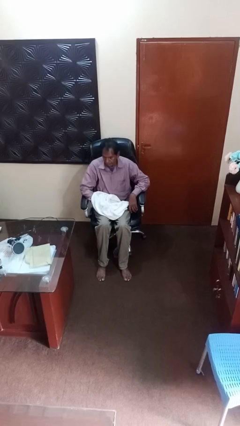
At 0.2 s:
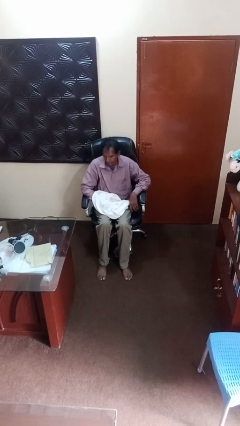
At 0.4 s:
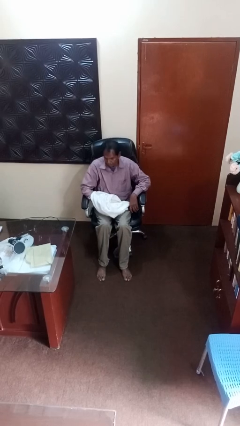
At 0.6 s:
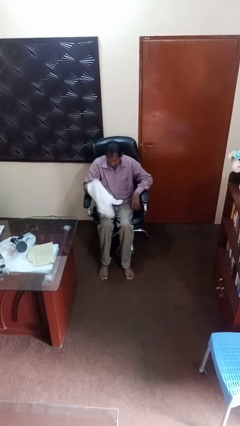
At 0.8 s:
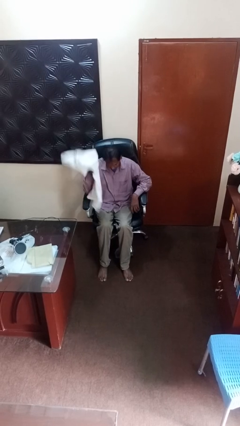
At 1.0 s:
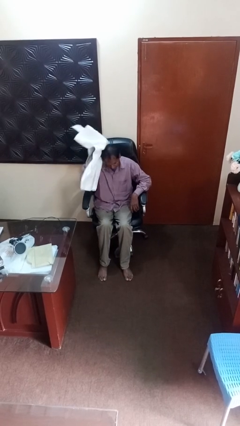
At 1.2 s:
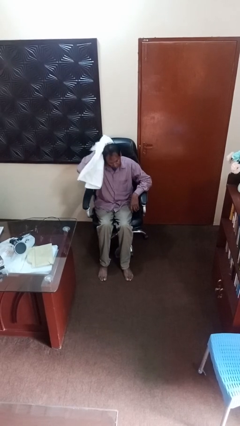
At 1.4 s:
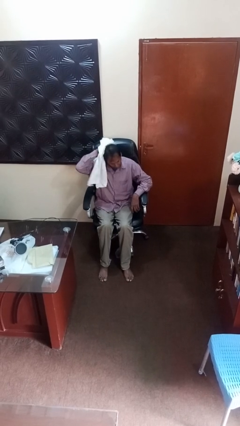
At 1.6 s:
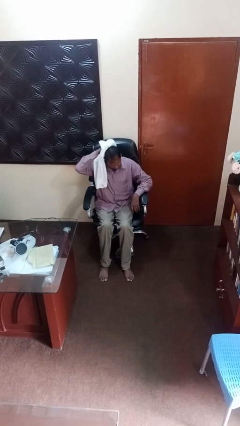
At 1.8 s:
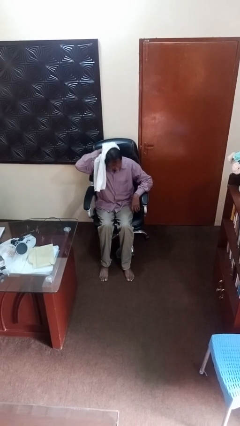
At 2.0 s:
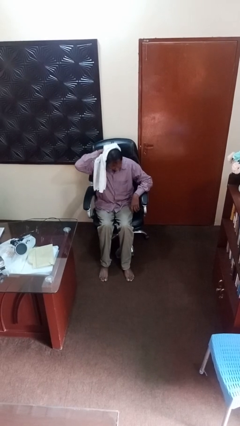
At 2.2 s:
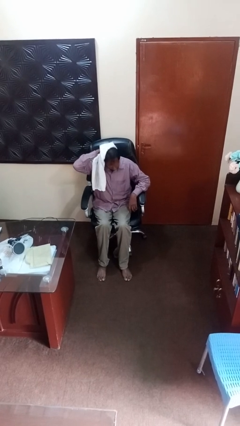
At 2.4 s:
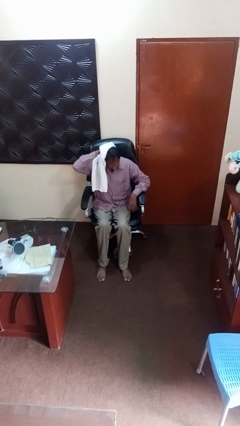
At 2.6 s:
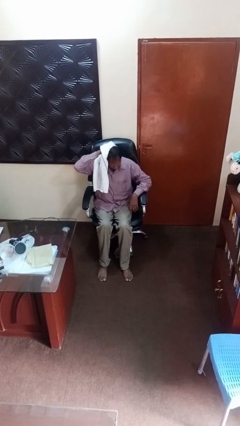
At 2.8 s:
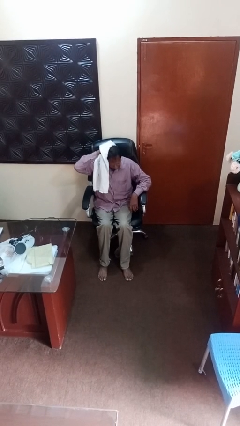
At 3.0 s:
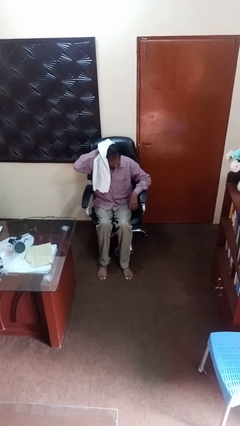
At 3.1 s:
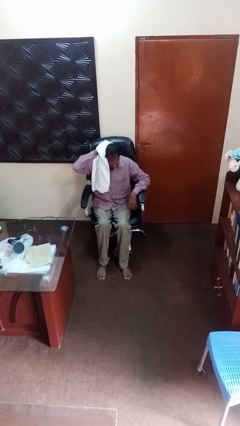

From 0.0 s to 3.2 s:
person dries hair with towel

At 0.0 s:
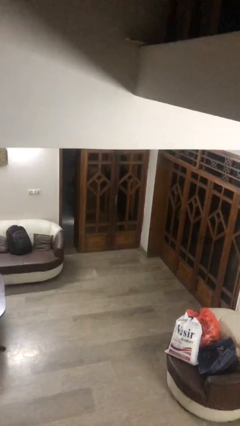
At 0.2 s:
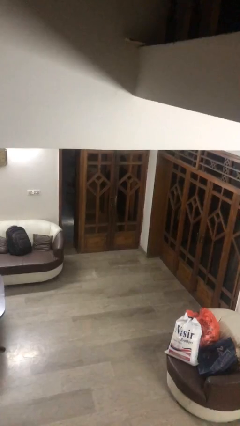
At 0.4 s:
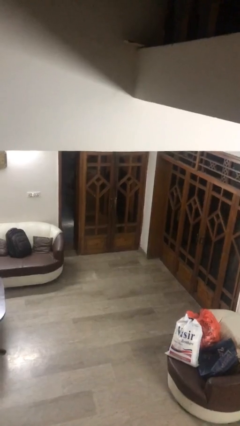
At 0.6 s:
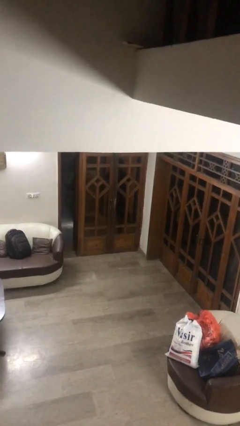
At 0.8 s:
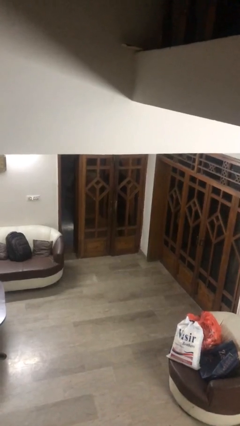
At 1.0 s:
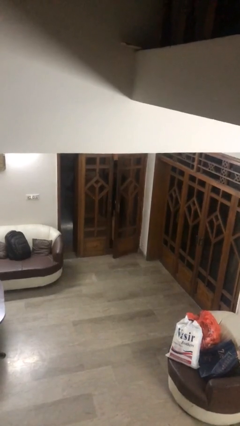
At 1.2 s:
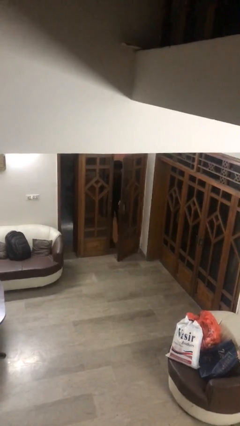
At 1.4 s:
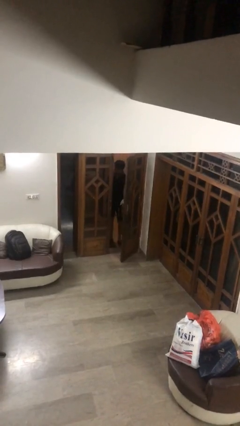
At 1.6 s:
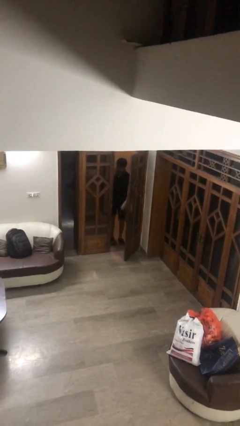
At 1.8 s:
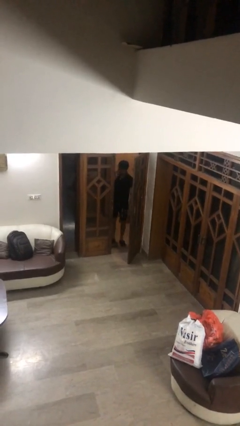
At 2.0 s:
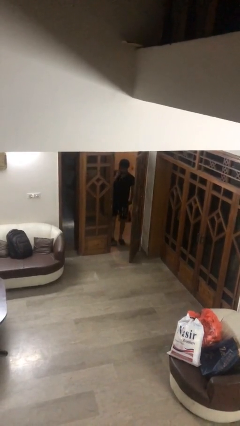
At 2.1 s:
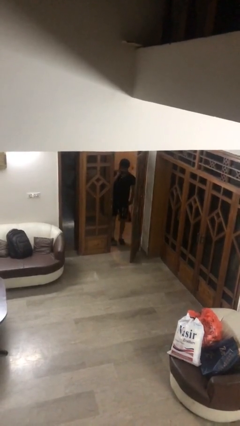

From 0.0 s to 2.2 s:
person opens facility door

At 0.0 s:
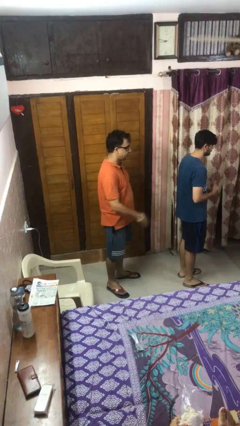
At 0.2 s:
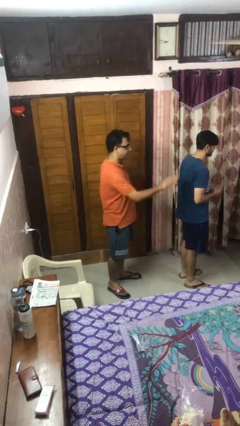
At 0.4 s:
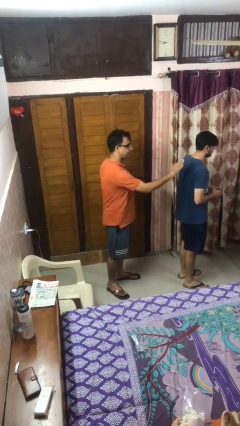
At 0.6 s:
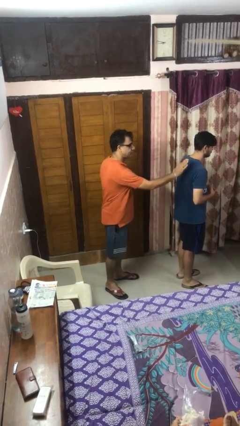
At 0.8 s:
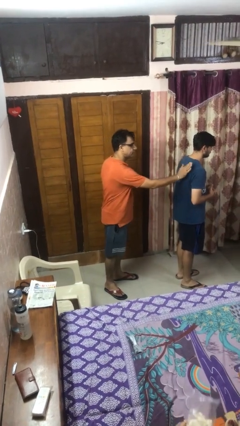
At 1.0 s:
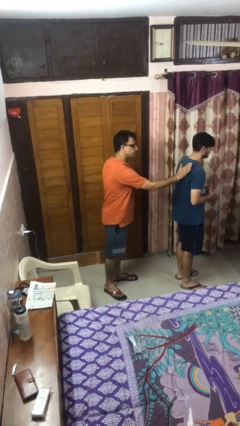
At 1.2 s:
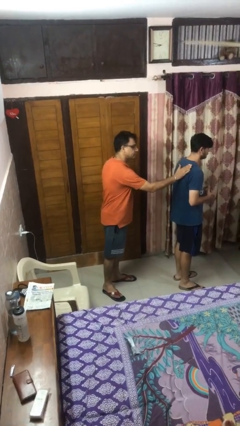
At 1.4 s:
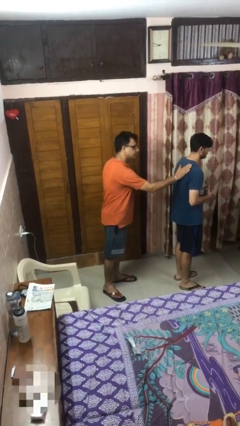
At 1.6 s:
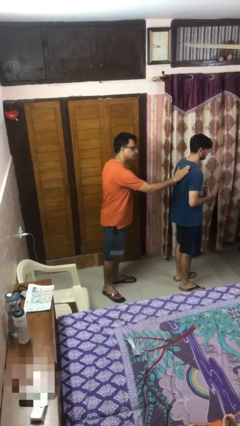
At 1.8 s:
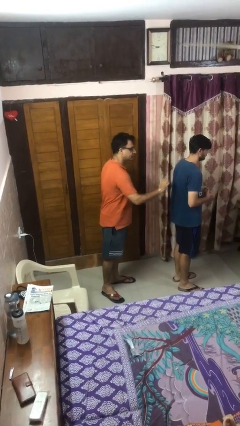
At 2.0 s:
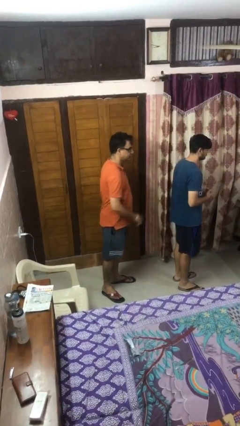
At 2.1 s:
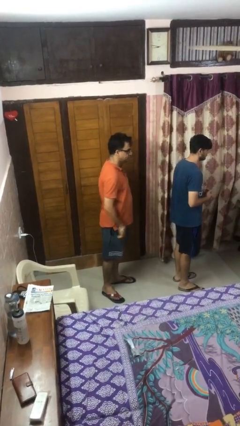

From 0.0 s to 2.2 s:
person touches back of person

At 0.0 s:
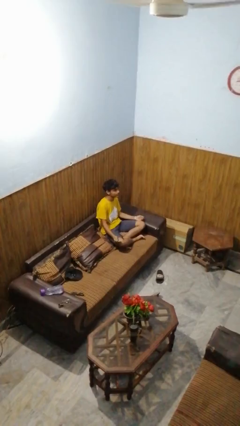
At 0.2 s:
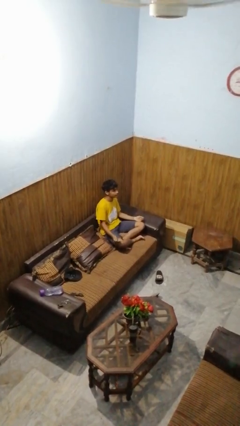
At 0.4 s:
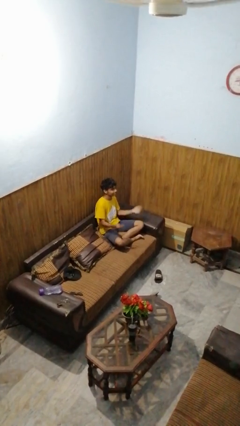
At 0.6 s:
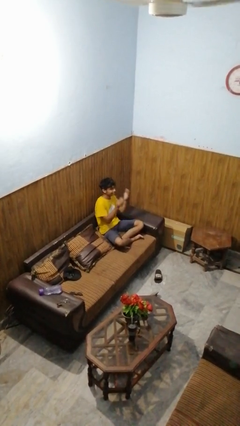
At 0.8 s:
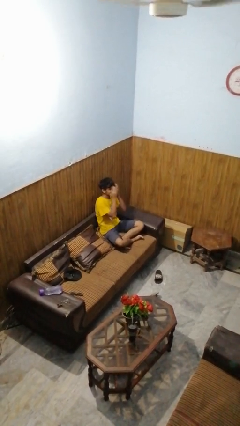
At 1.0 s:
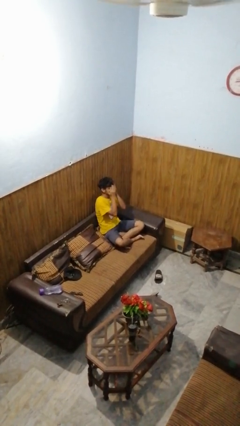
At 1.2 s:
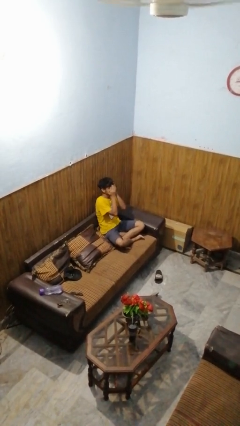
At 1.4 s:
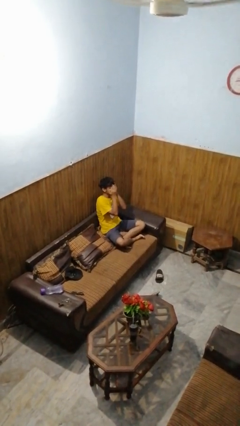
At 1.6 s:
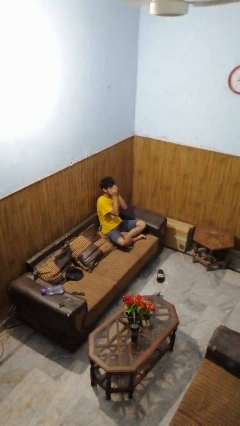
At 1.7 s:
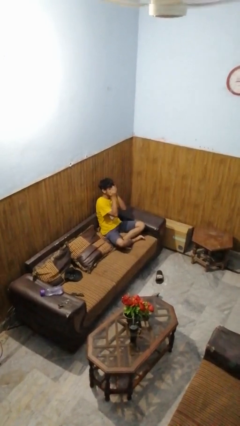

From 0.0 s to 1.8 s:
person covers face with hands

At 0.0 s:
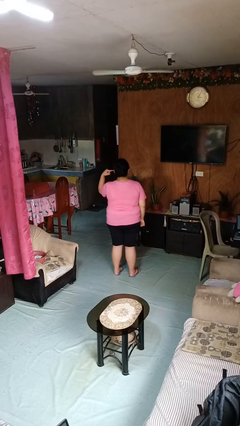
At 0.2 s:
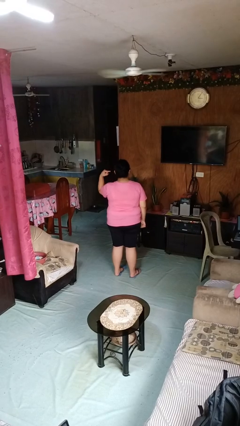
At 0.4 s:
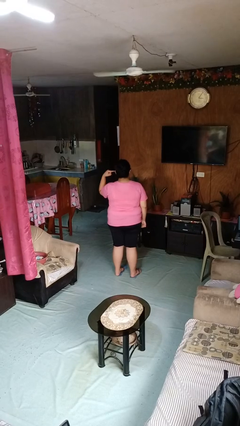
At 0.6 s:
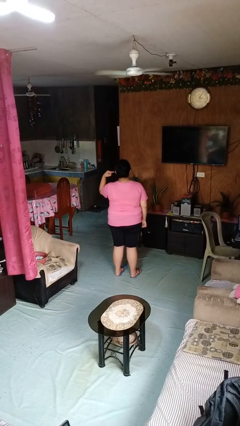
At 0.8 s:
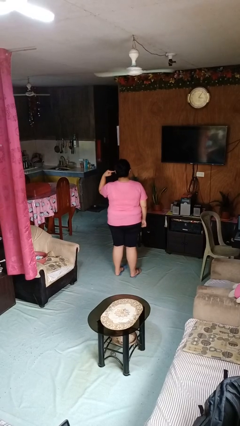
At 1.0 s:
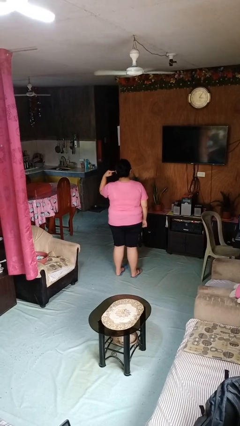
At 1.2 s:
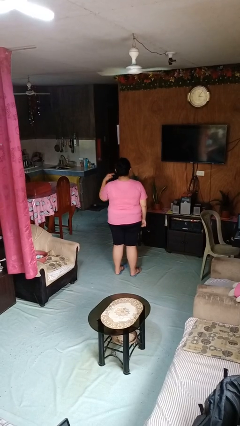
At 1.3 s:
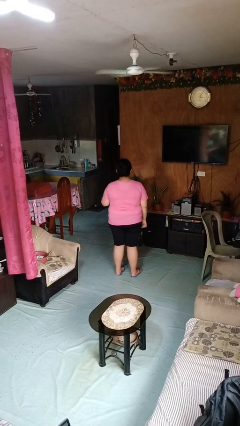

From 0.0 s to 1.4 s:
person gestures listen closely

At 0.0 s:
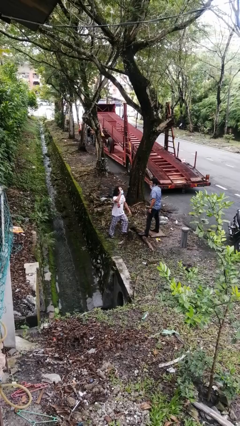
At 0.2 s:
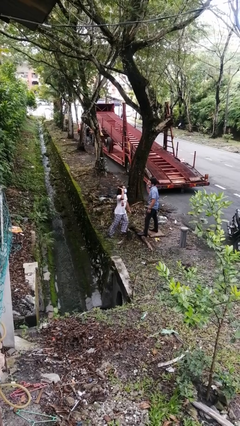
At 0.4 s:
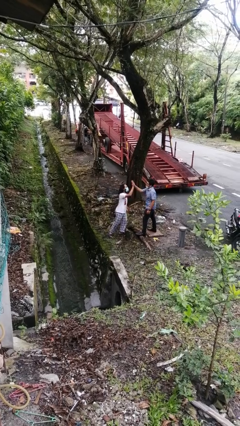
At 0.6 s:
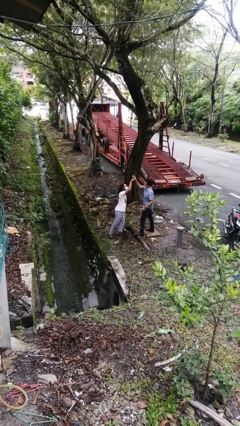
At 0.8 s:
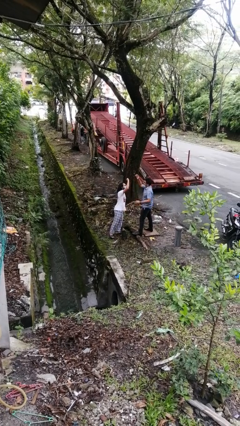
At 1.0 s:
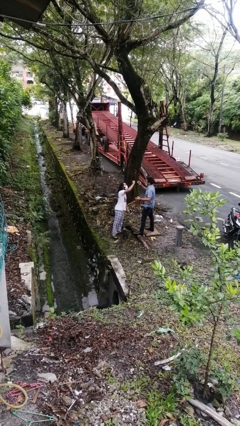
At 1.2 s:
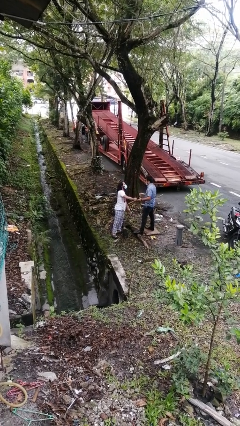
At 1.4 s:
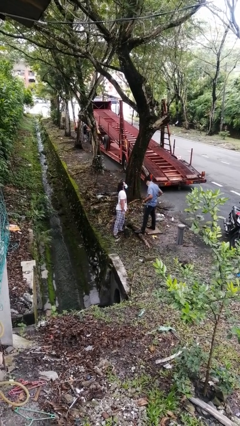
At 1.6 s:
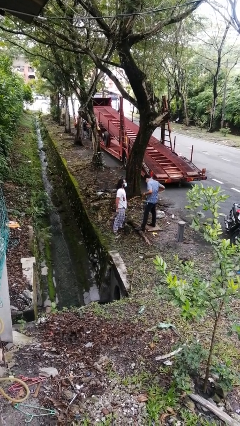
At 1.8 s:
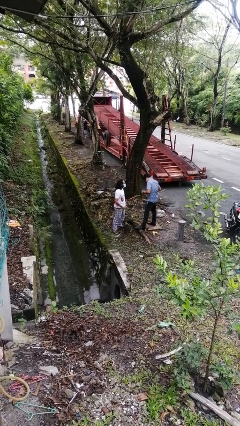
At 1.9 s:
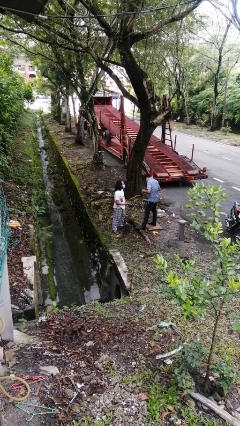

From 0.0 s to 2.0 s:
person highfives hand

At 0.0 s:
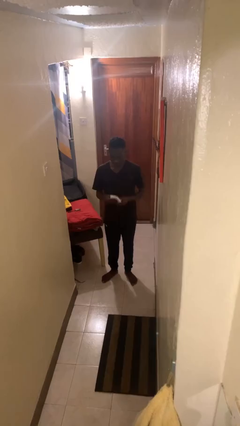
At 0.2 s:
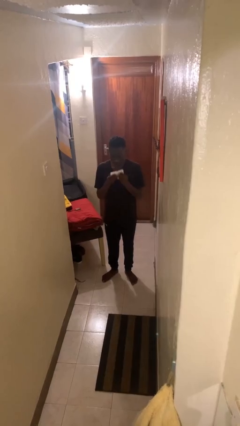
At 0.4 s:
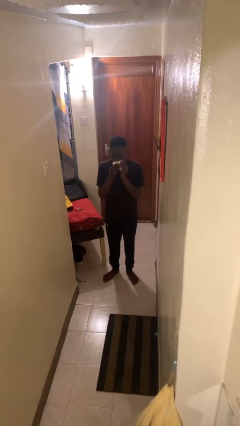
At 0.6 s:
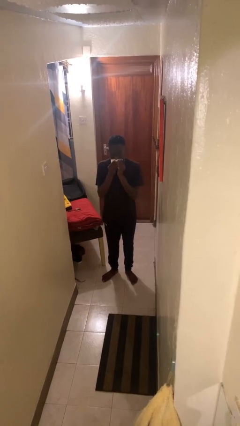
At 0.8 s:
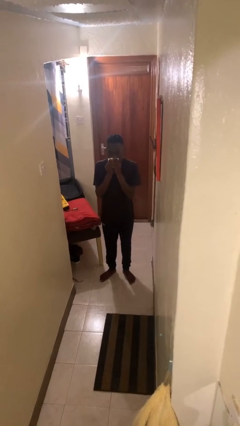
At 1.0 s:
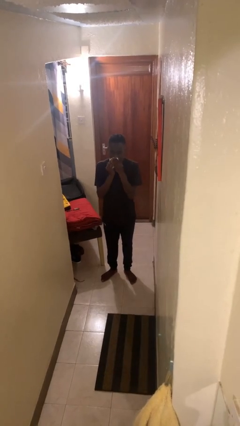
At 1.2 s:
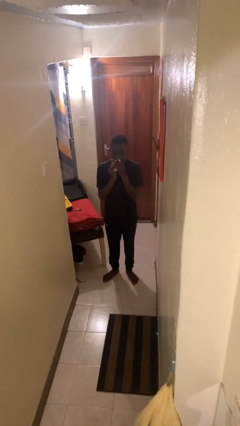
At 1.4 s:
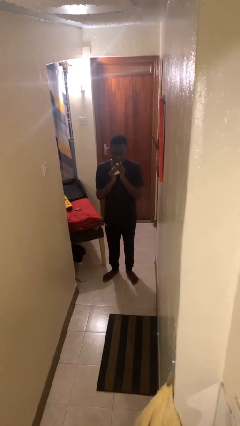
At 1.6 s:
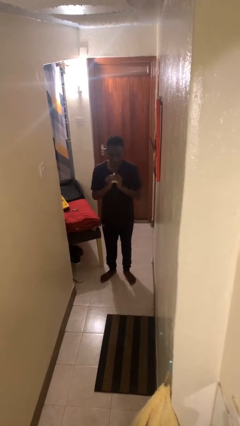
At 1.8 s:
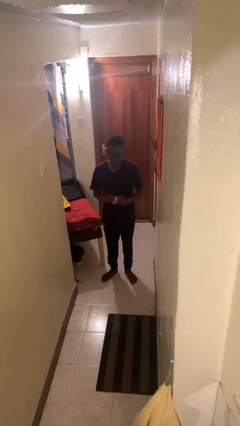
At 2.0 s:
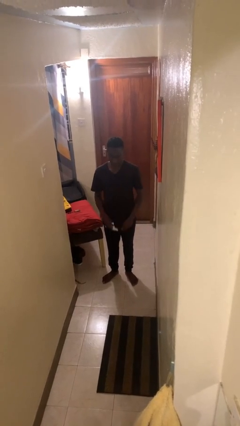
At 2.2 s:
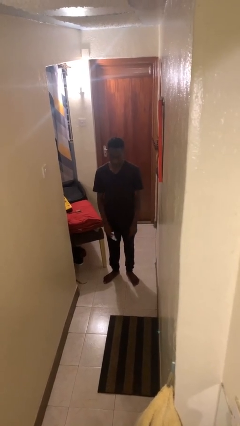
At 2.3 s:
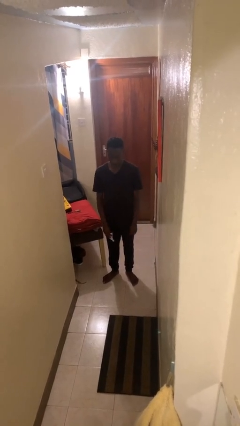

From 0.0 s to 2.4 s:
person wipes mouth with napkin

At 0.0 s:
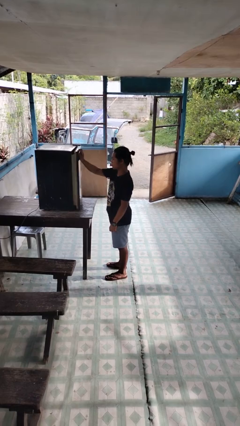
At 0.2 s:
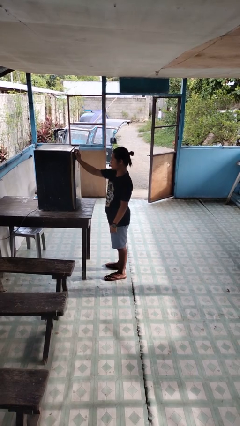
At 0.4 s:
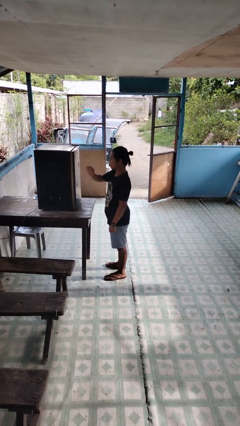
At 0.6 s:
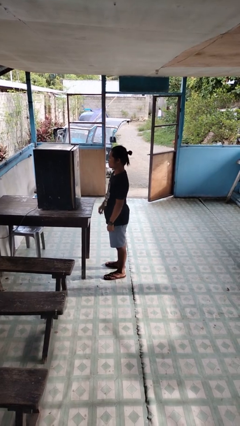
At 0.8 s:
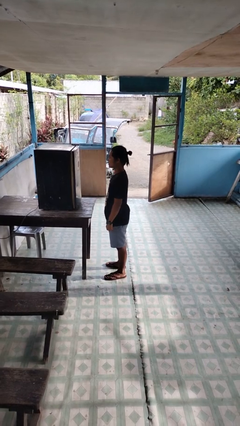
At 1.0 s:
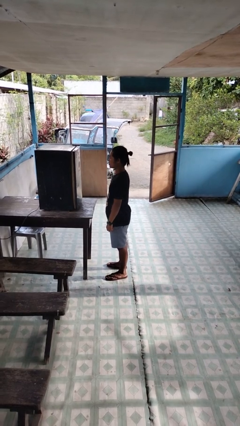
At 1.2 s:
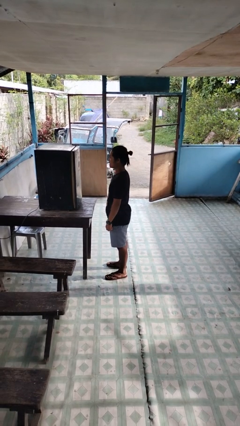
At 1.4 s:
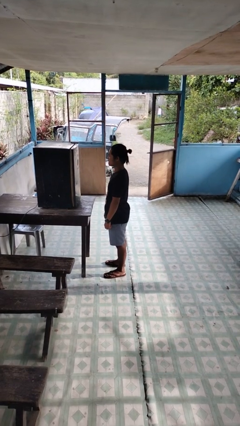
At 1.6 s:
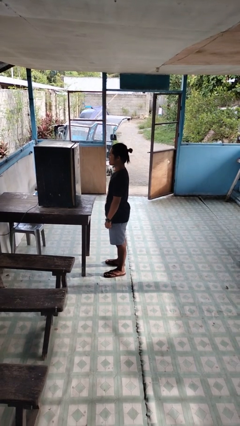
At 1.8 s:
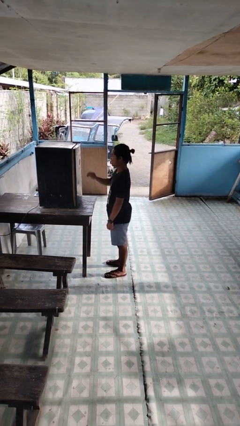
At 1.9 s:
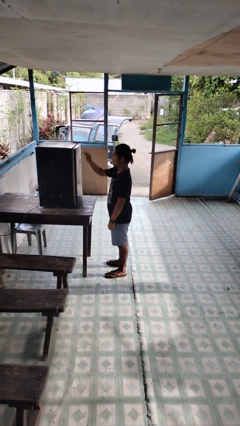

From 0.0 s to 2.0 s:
person closes refrigerator
